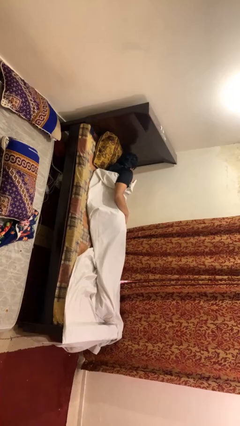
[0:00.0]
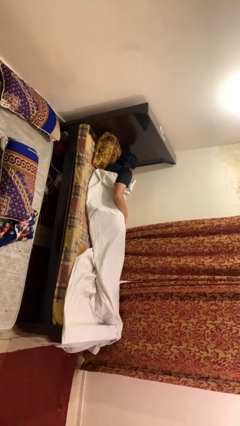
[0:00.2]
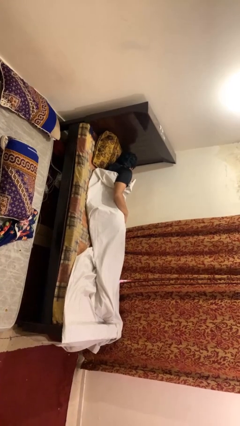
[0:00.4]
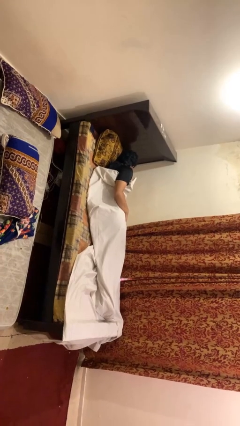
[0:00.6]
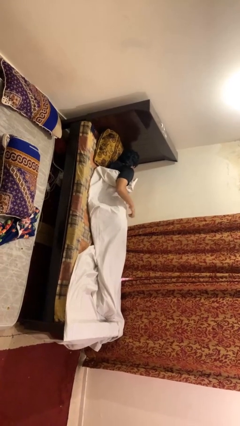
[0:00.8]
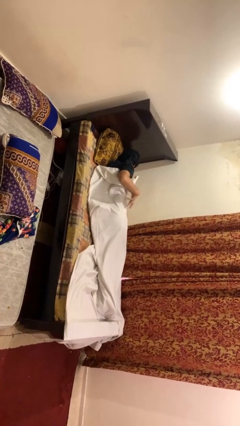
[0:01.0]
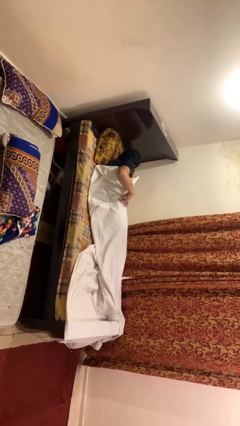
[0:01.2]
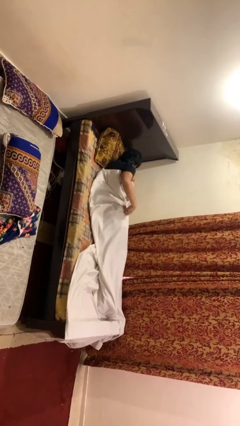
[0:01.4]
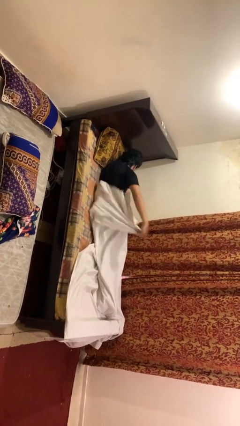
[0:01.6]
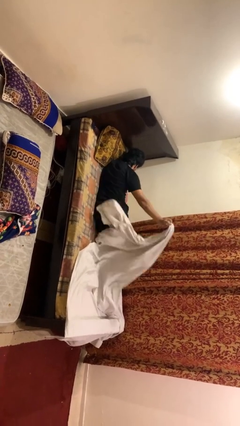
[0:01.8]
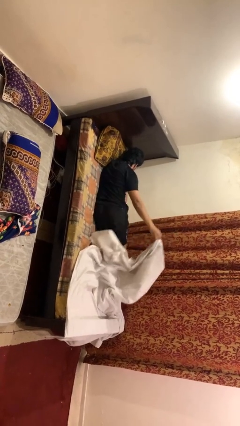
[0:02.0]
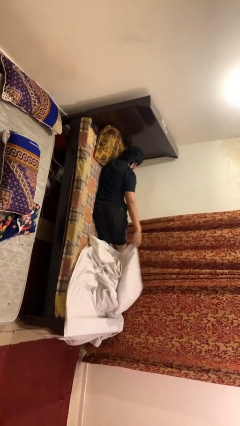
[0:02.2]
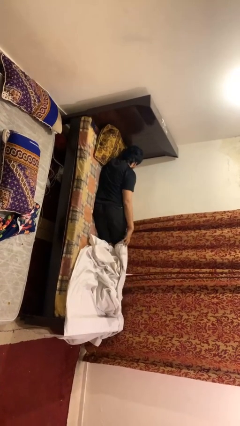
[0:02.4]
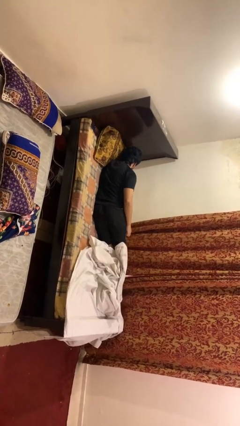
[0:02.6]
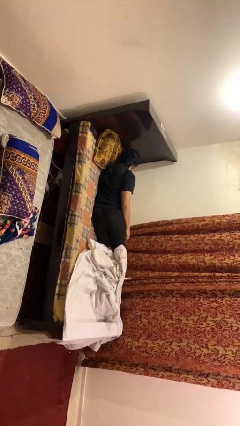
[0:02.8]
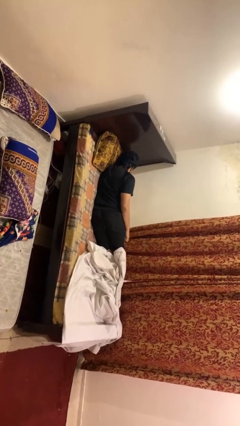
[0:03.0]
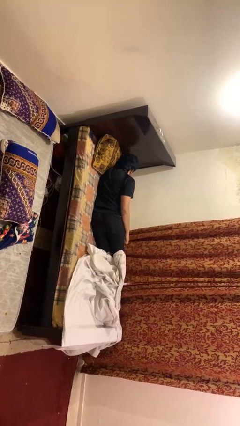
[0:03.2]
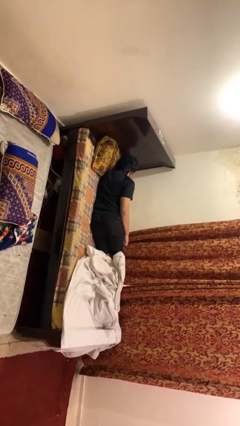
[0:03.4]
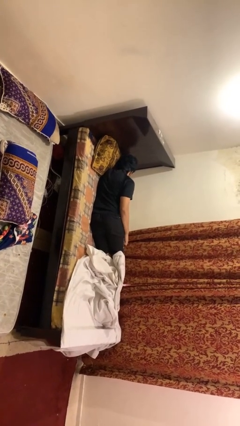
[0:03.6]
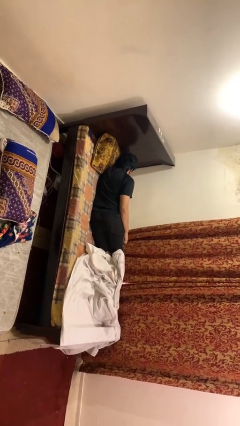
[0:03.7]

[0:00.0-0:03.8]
person uncovers with bedsheets

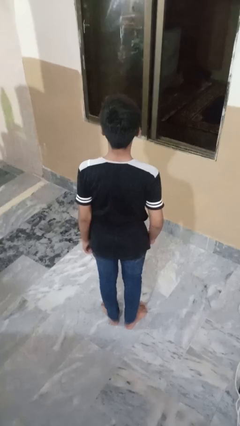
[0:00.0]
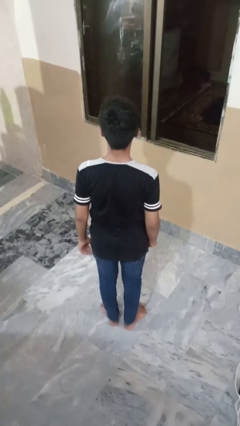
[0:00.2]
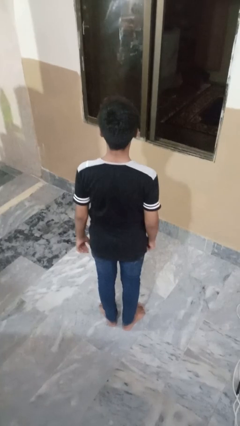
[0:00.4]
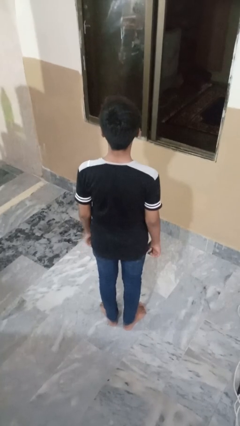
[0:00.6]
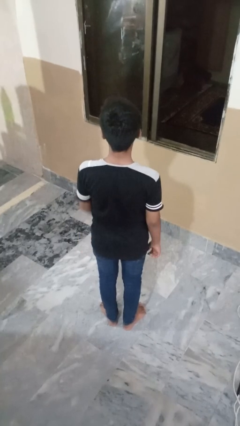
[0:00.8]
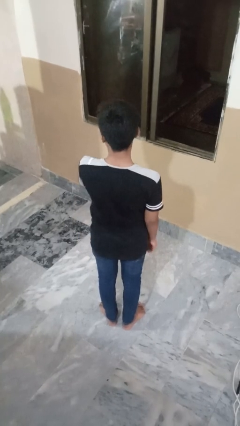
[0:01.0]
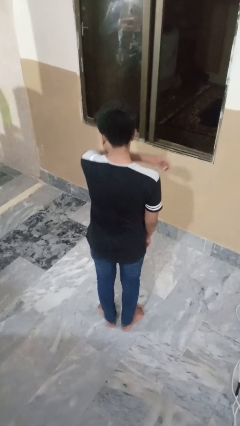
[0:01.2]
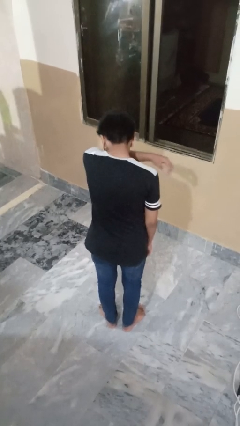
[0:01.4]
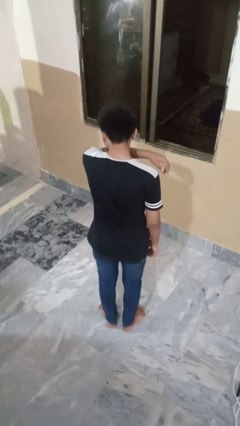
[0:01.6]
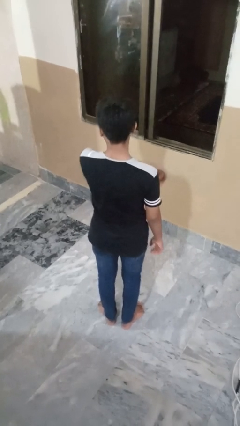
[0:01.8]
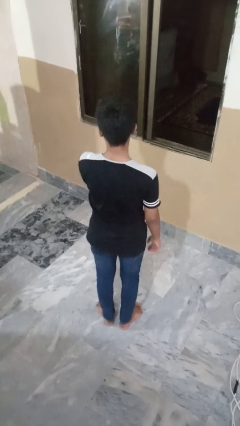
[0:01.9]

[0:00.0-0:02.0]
person sneezes into arm

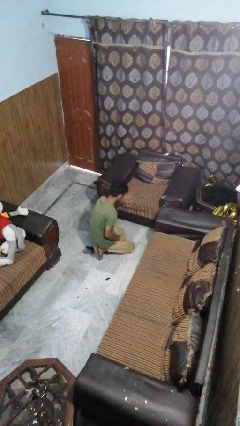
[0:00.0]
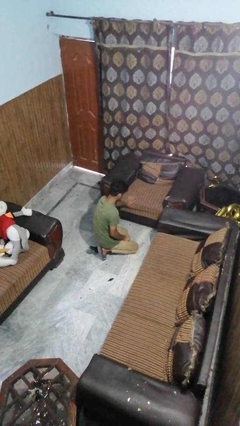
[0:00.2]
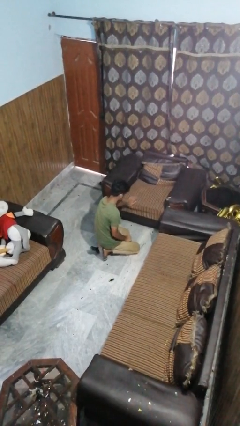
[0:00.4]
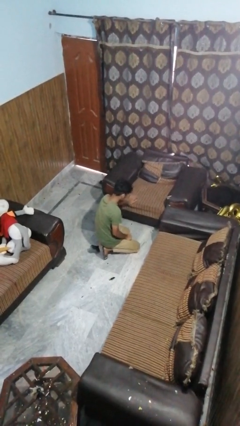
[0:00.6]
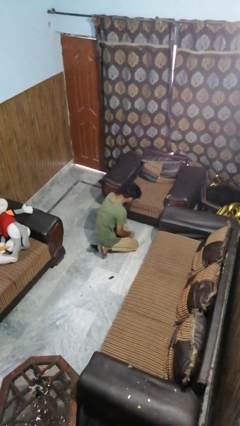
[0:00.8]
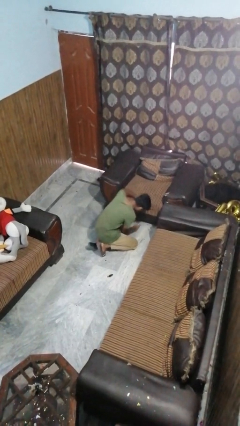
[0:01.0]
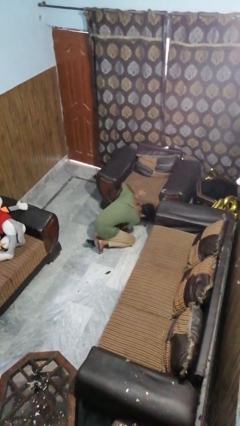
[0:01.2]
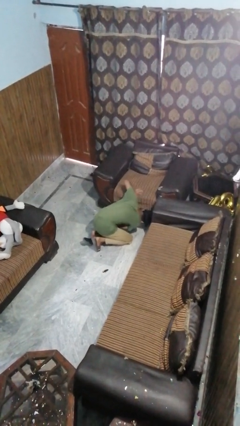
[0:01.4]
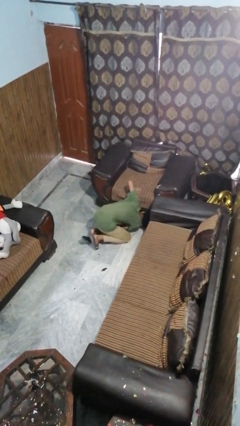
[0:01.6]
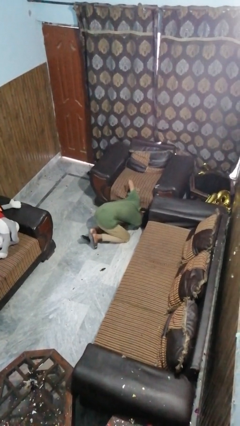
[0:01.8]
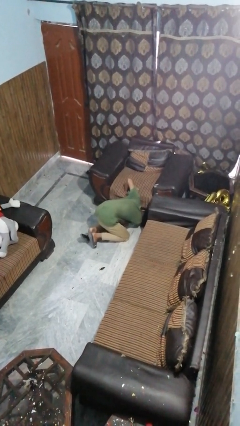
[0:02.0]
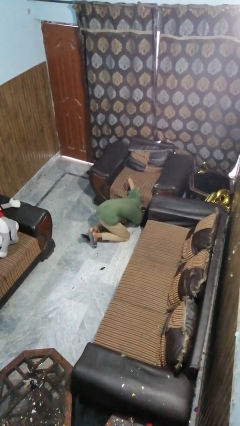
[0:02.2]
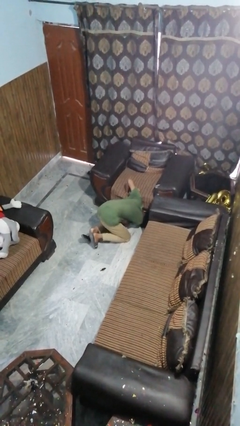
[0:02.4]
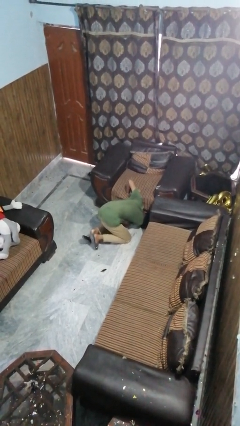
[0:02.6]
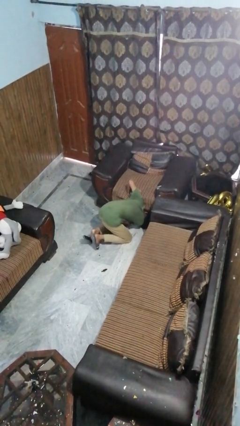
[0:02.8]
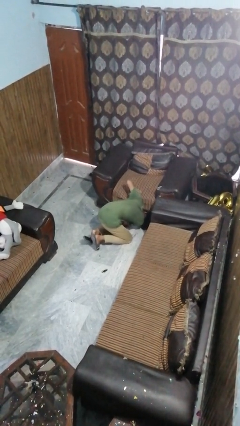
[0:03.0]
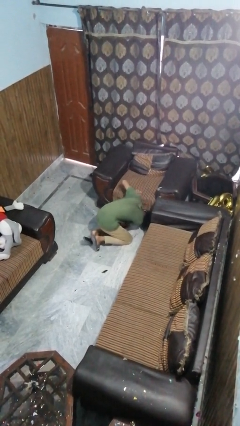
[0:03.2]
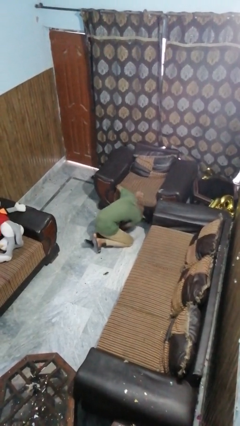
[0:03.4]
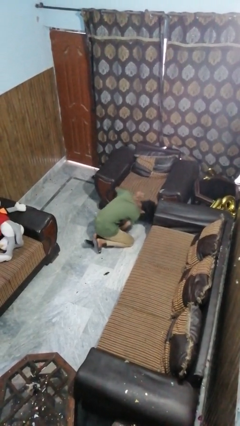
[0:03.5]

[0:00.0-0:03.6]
person searches under couch

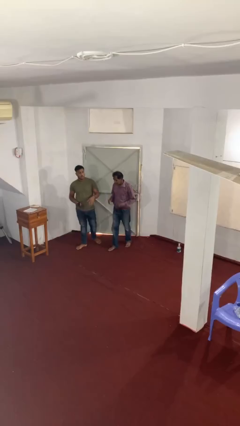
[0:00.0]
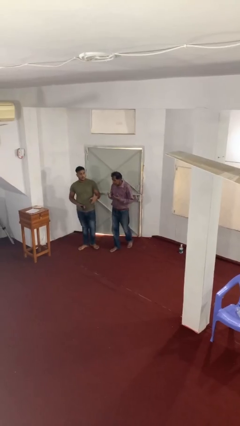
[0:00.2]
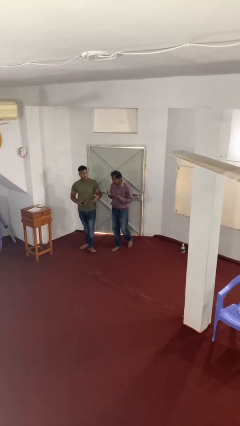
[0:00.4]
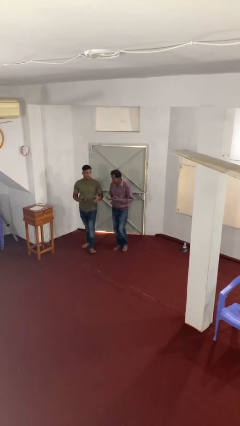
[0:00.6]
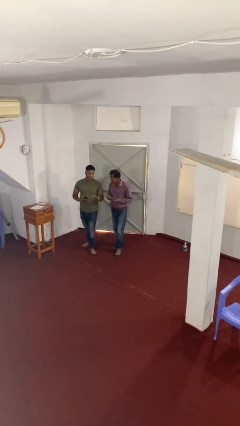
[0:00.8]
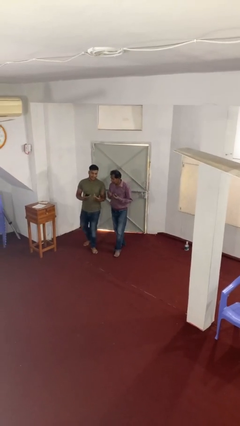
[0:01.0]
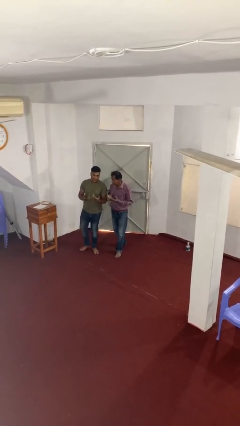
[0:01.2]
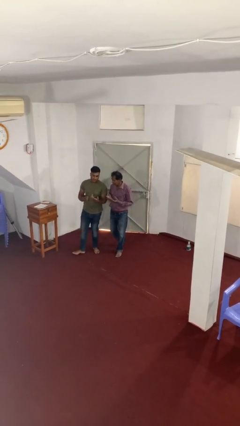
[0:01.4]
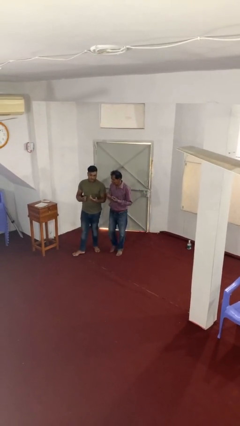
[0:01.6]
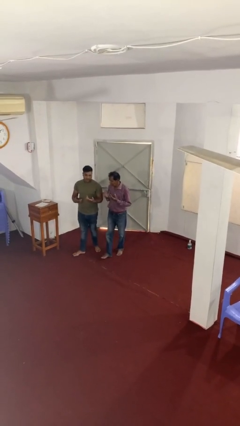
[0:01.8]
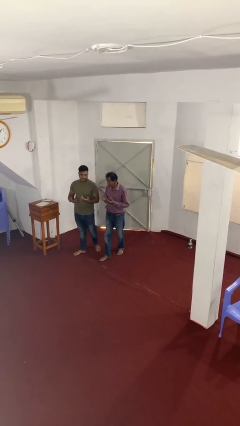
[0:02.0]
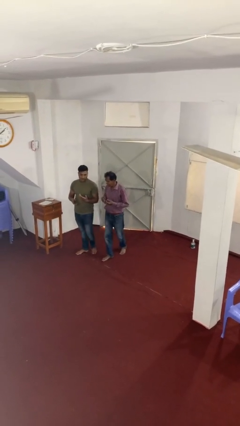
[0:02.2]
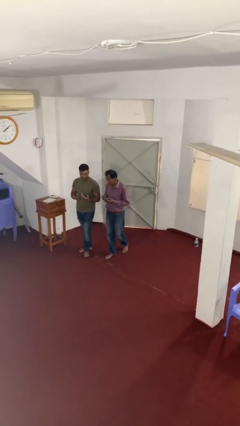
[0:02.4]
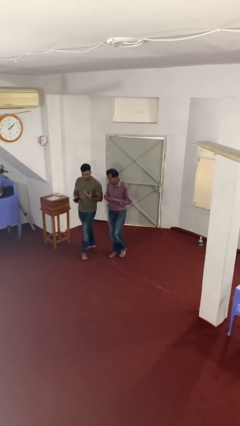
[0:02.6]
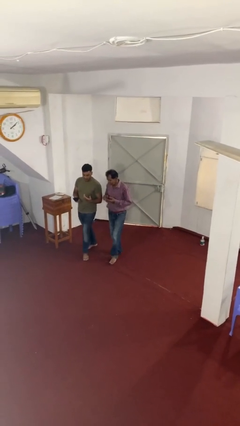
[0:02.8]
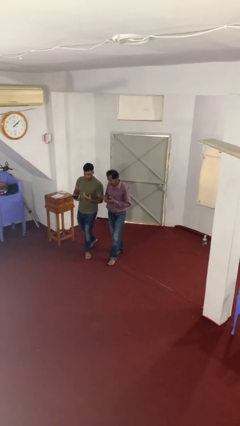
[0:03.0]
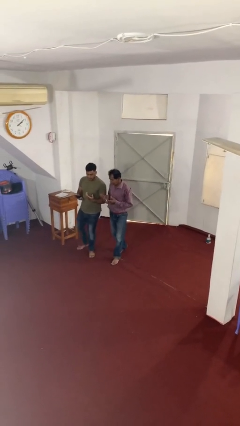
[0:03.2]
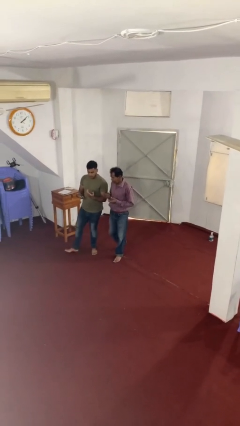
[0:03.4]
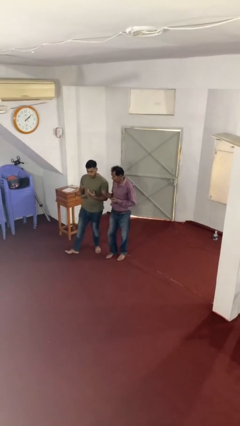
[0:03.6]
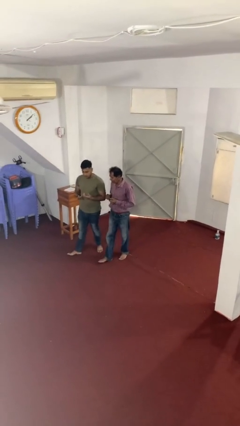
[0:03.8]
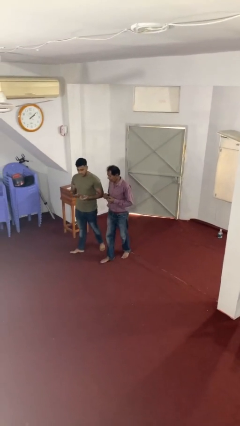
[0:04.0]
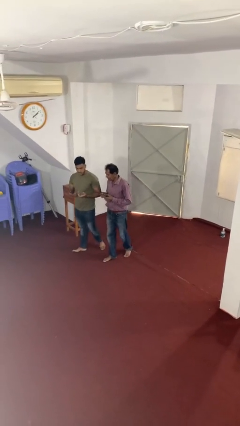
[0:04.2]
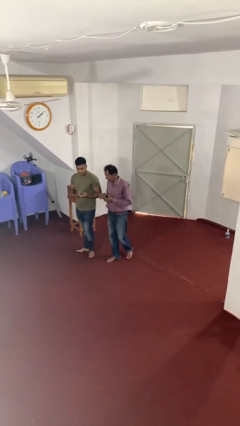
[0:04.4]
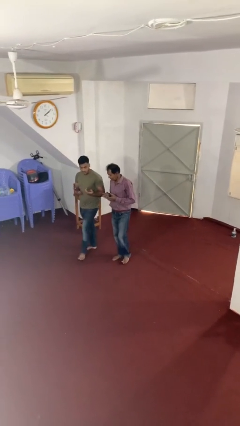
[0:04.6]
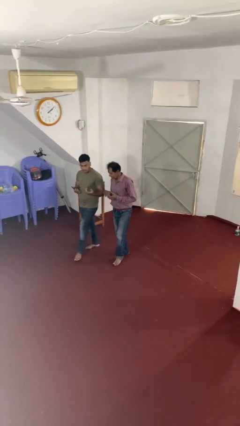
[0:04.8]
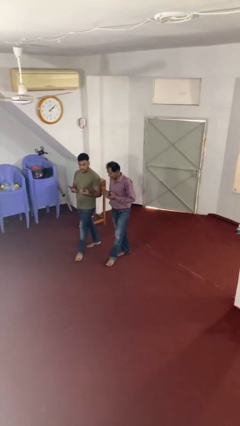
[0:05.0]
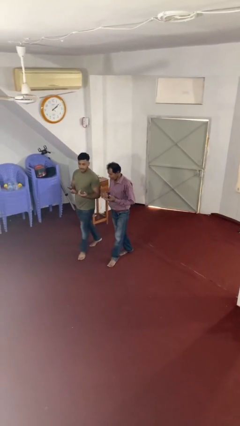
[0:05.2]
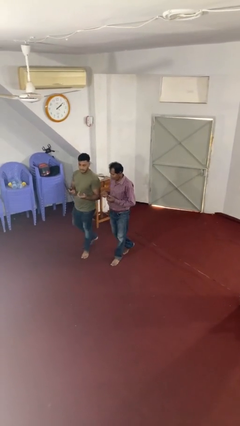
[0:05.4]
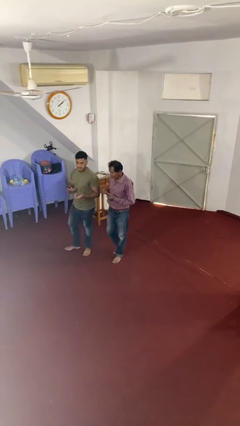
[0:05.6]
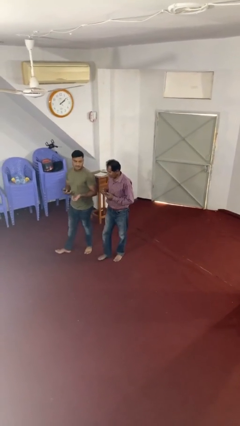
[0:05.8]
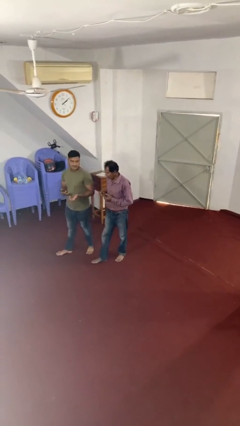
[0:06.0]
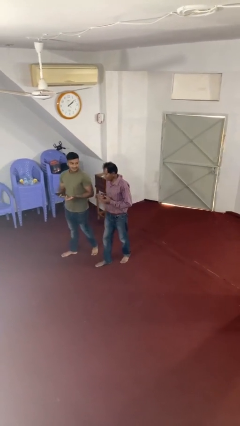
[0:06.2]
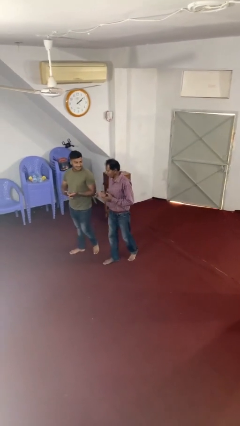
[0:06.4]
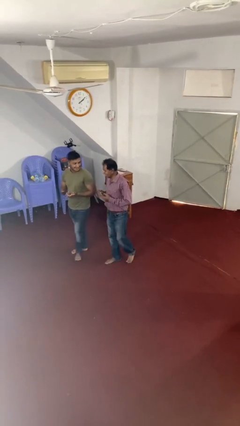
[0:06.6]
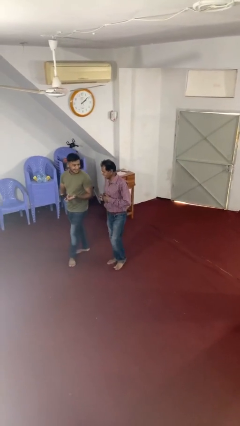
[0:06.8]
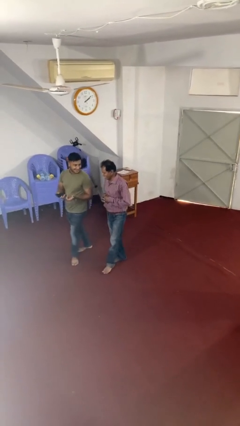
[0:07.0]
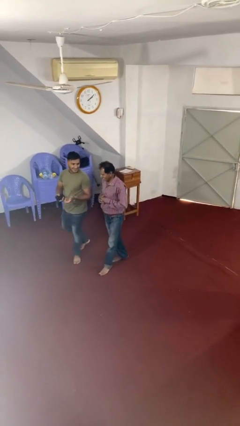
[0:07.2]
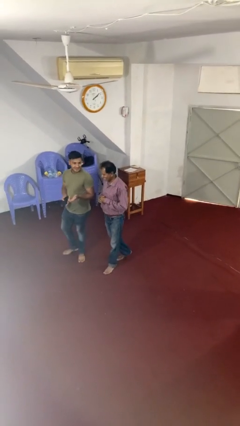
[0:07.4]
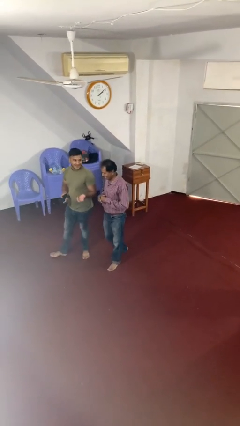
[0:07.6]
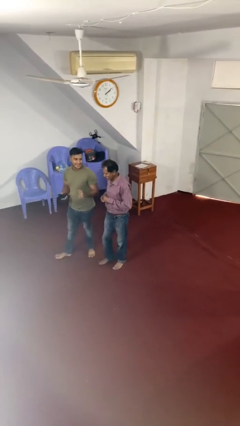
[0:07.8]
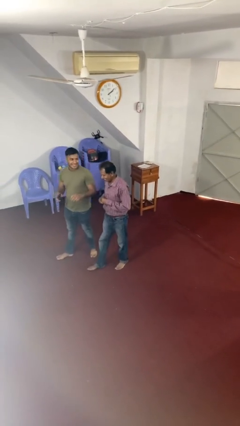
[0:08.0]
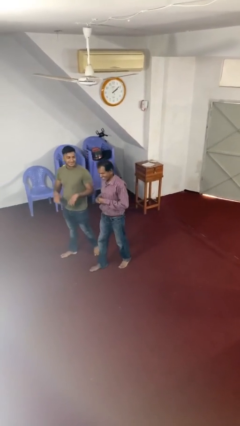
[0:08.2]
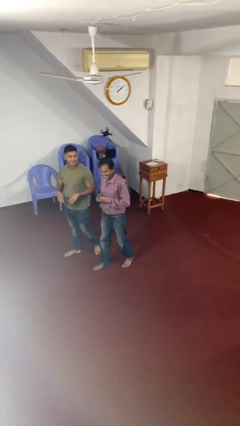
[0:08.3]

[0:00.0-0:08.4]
person talks to person
